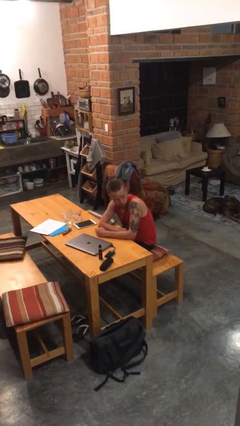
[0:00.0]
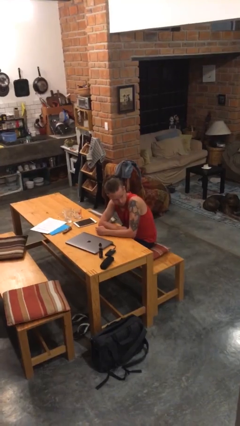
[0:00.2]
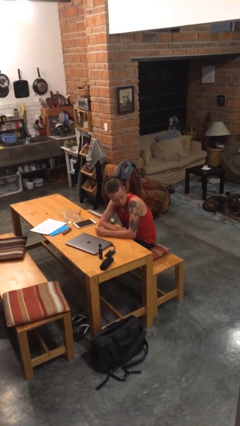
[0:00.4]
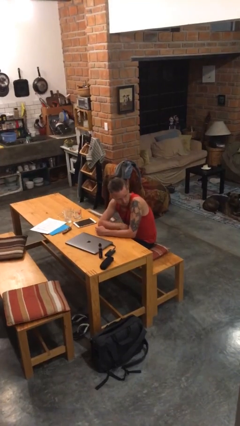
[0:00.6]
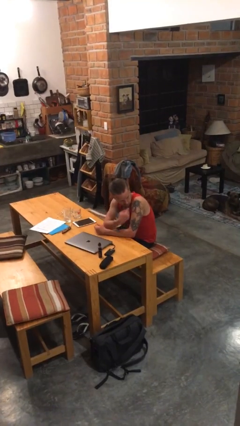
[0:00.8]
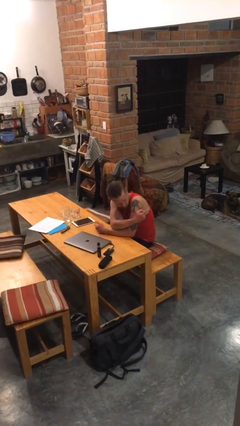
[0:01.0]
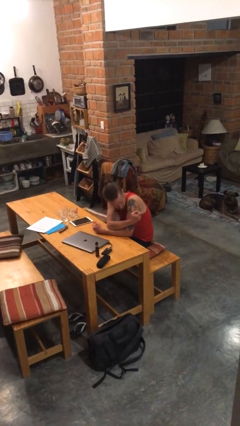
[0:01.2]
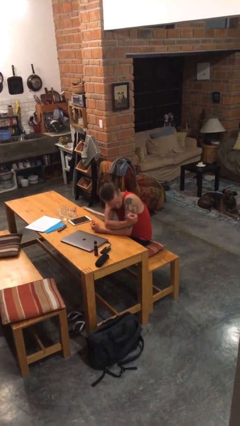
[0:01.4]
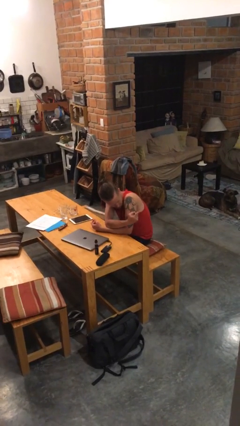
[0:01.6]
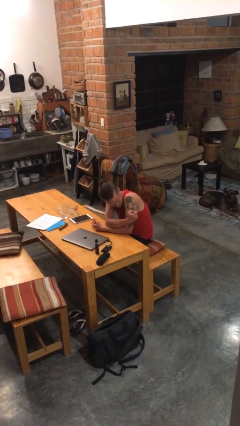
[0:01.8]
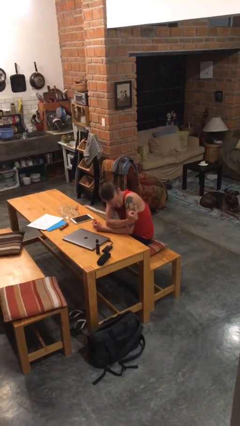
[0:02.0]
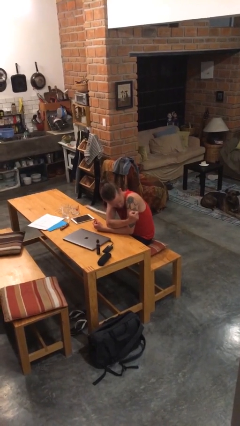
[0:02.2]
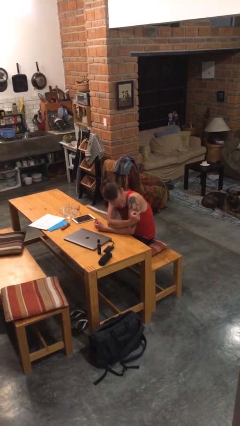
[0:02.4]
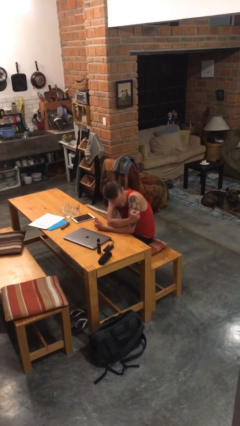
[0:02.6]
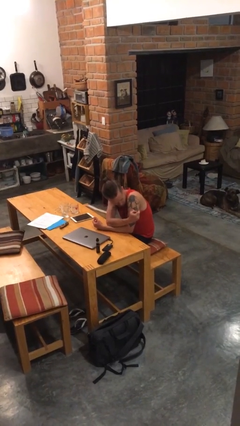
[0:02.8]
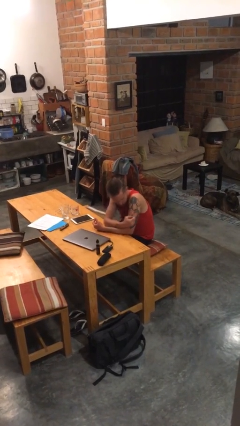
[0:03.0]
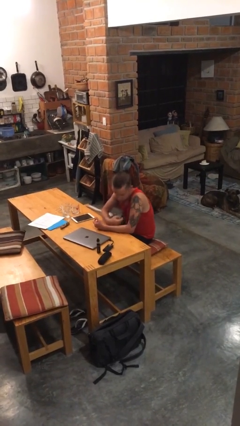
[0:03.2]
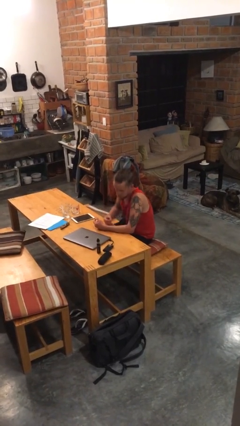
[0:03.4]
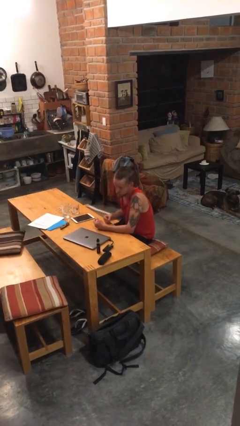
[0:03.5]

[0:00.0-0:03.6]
person gestures come here

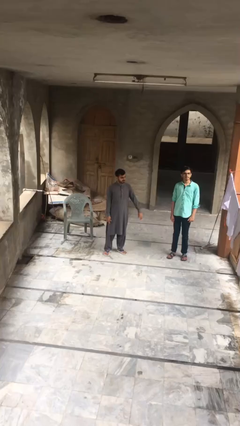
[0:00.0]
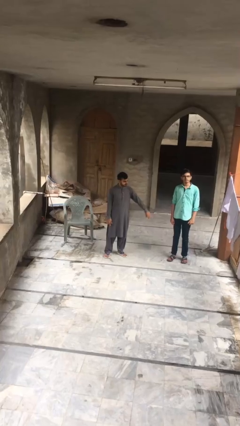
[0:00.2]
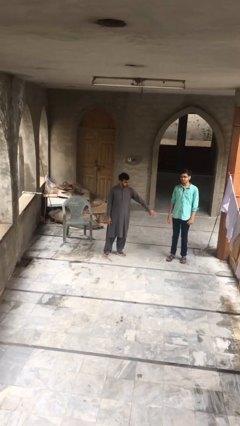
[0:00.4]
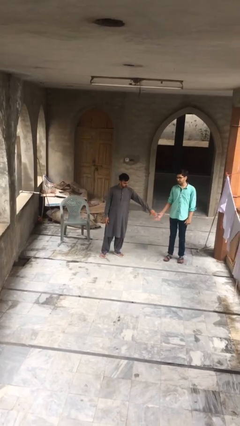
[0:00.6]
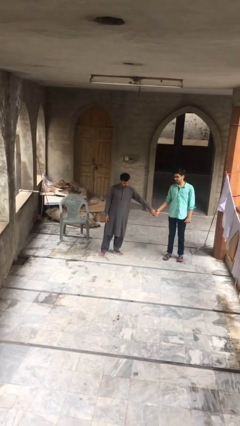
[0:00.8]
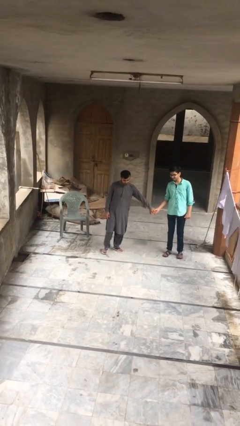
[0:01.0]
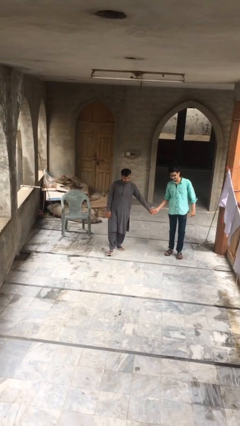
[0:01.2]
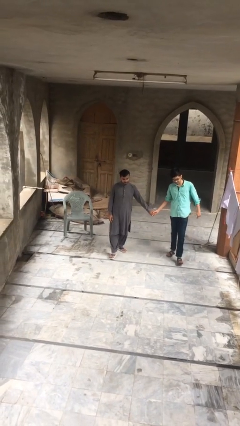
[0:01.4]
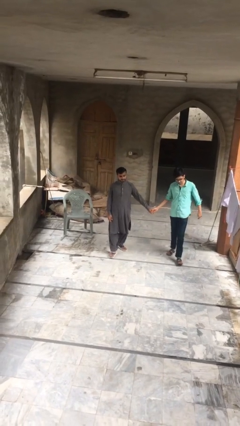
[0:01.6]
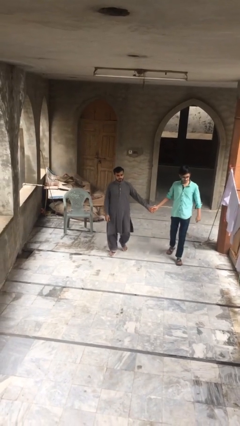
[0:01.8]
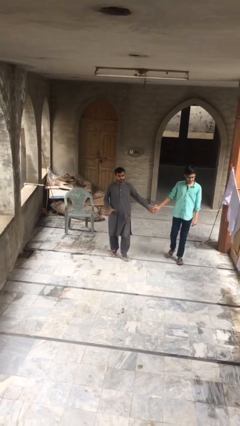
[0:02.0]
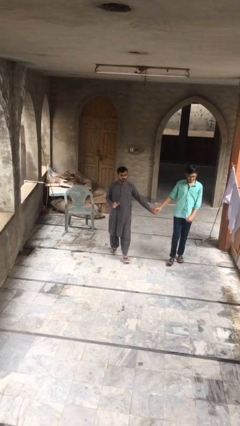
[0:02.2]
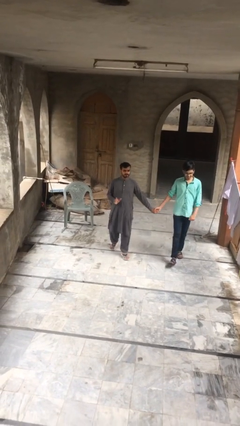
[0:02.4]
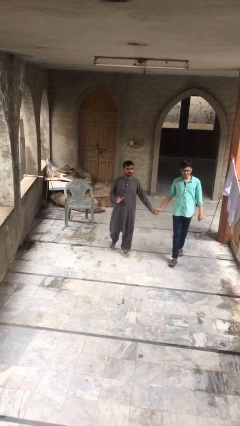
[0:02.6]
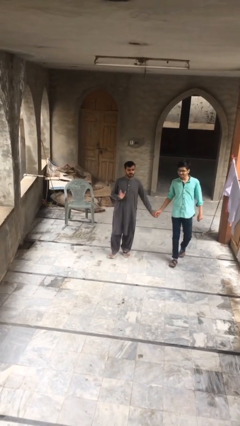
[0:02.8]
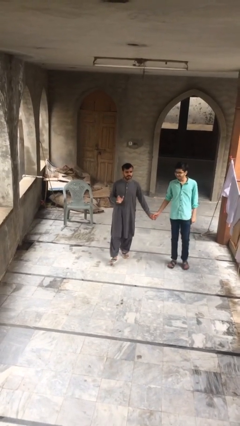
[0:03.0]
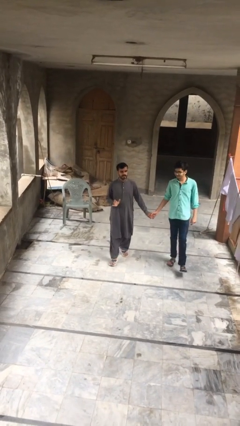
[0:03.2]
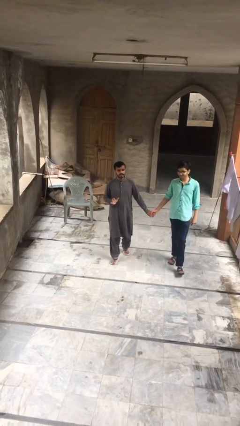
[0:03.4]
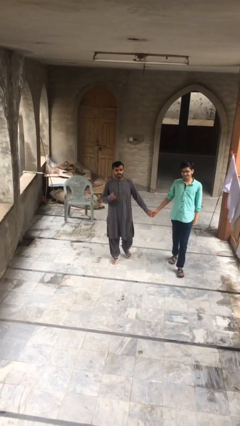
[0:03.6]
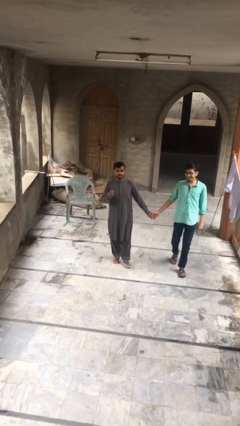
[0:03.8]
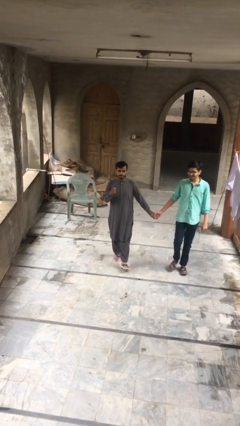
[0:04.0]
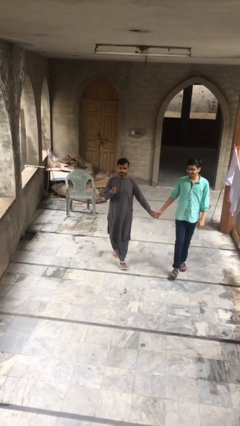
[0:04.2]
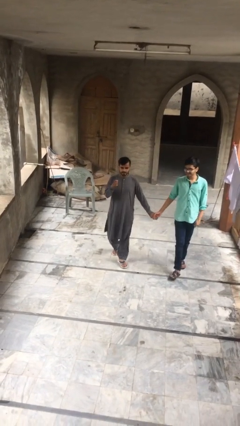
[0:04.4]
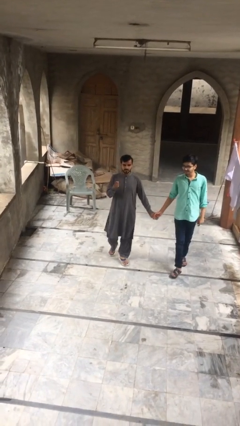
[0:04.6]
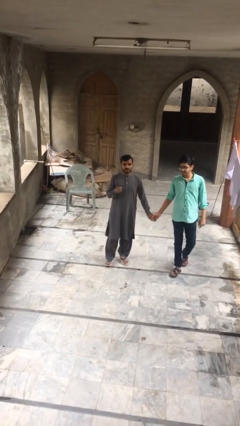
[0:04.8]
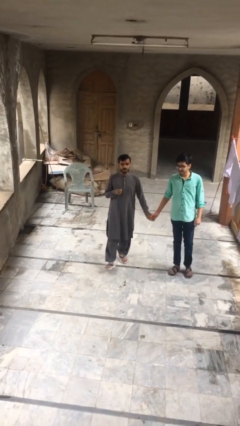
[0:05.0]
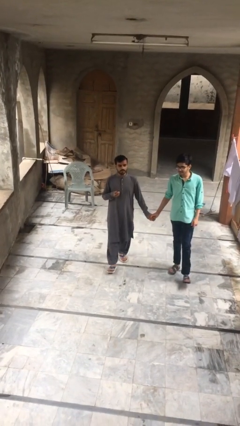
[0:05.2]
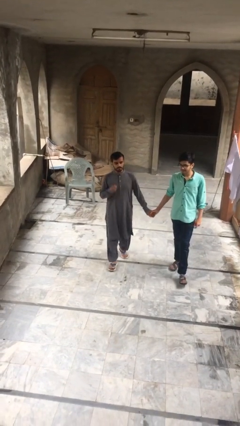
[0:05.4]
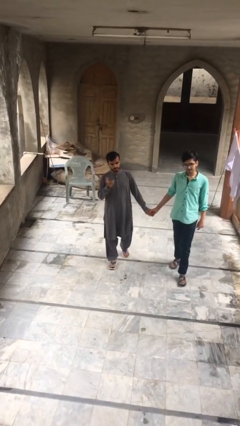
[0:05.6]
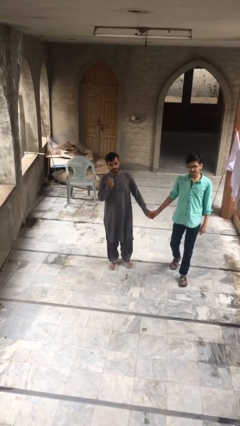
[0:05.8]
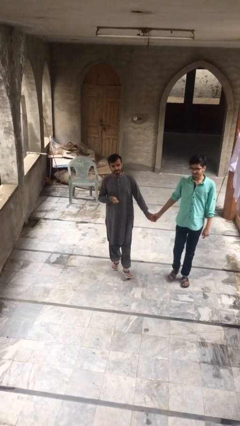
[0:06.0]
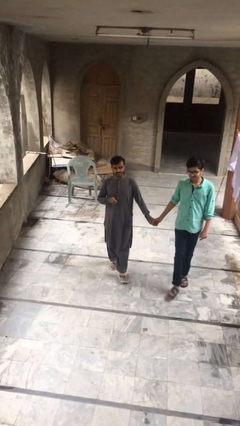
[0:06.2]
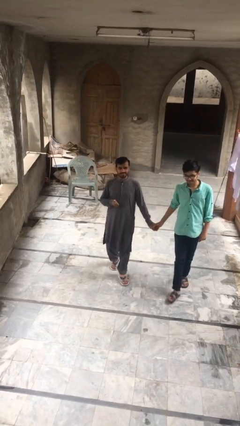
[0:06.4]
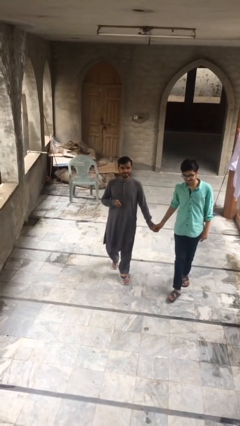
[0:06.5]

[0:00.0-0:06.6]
person holds hand

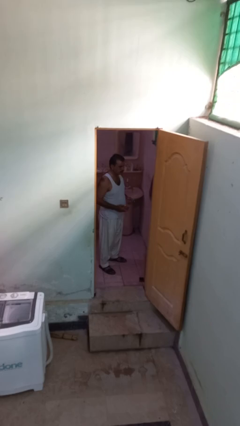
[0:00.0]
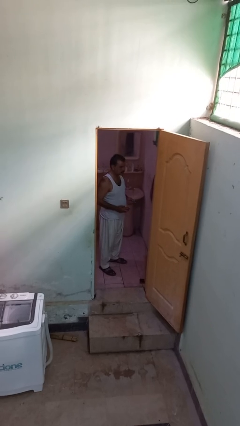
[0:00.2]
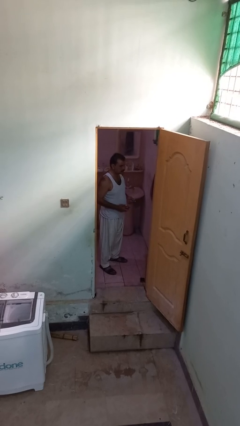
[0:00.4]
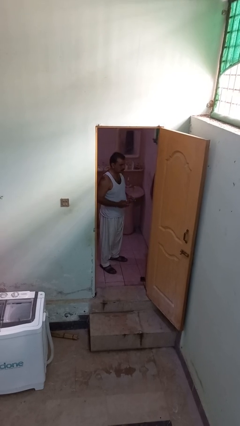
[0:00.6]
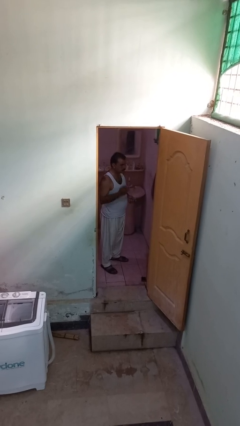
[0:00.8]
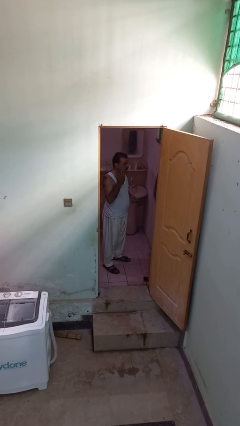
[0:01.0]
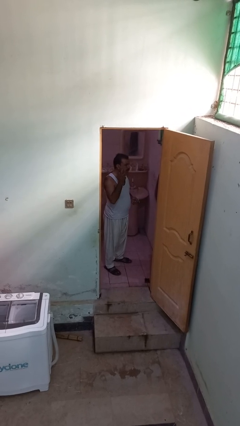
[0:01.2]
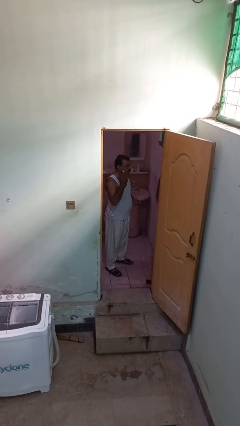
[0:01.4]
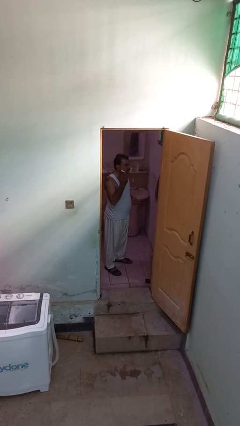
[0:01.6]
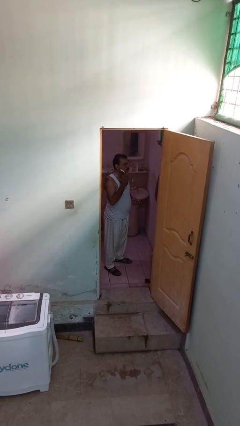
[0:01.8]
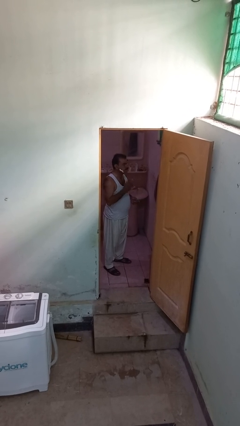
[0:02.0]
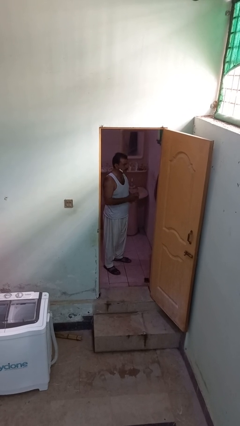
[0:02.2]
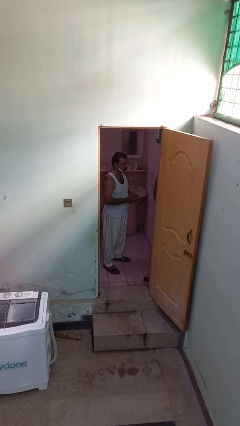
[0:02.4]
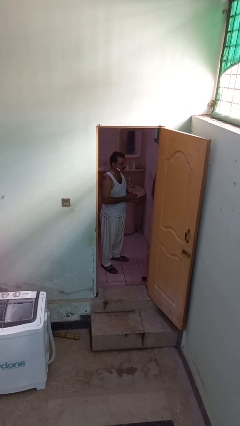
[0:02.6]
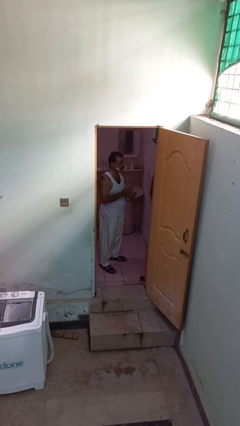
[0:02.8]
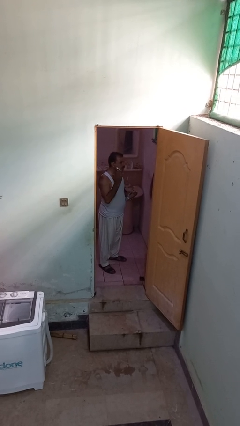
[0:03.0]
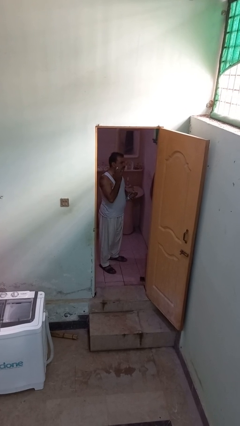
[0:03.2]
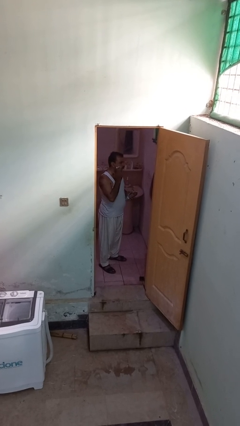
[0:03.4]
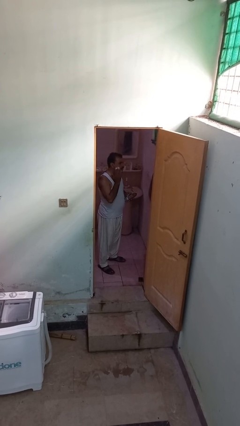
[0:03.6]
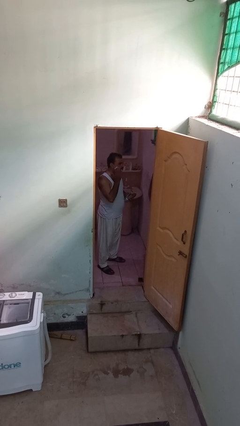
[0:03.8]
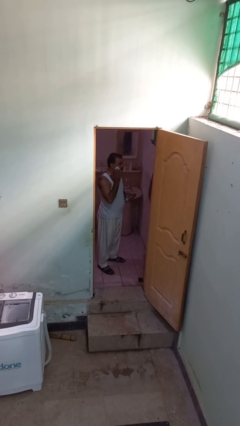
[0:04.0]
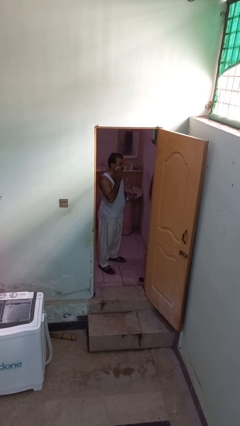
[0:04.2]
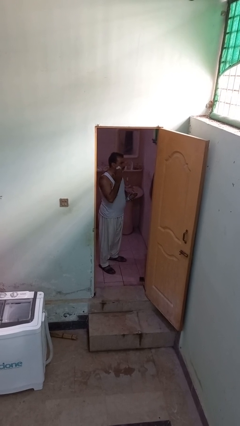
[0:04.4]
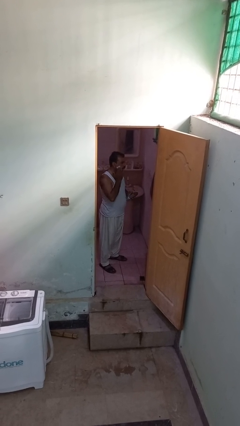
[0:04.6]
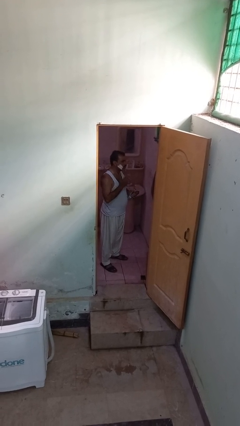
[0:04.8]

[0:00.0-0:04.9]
person applies shaving cream

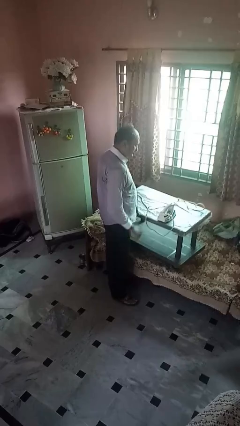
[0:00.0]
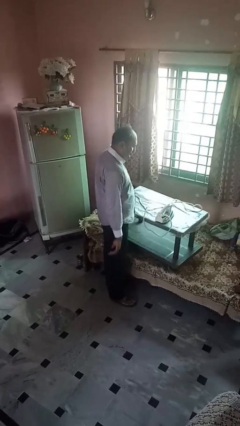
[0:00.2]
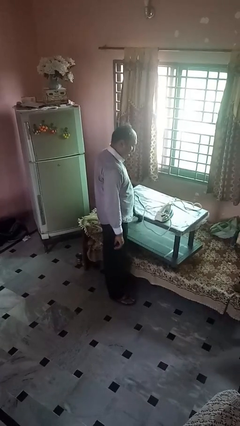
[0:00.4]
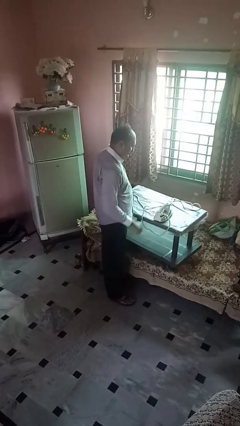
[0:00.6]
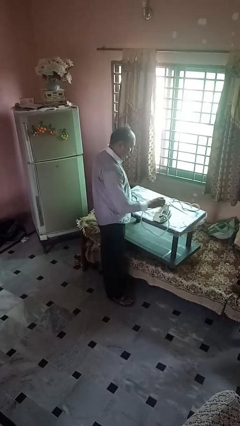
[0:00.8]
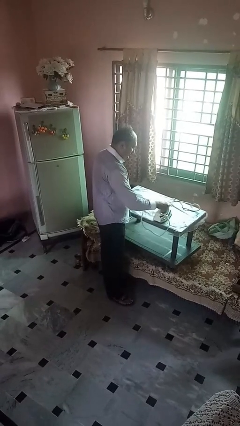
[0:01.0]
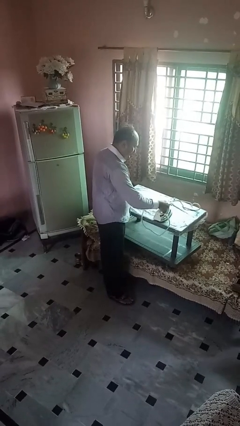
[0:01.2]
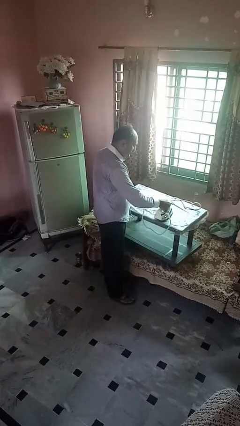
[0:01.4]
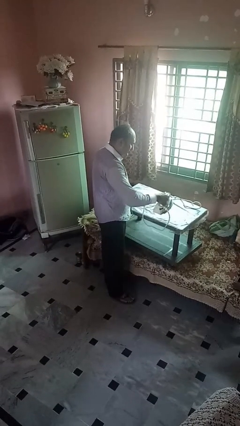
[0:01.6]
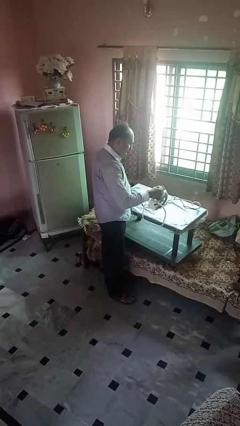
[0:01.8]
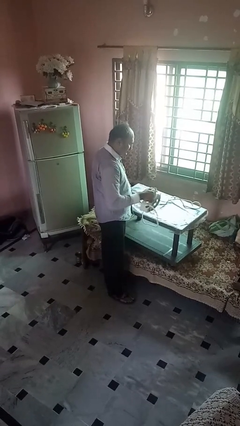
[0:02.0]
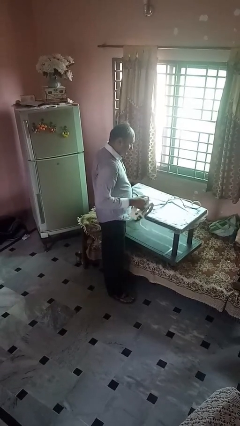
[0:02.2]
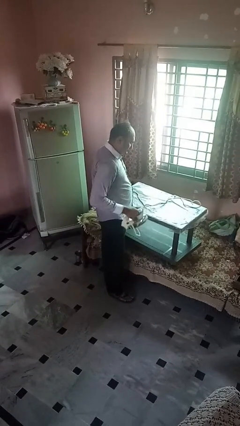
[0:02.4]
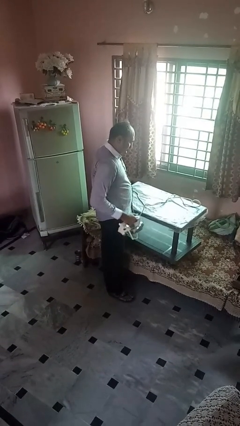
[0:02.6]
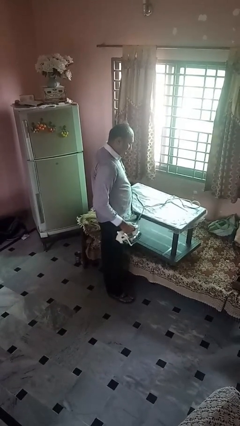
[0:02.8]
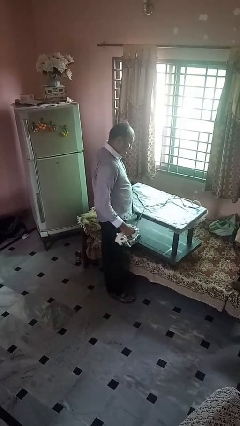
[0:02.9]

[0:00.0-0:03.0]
person picks up object from countertop
